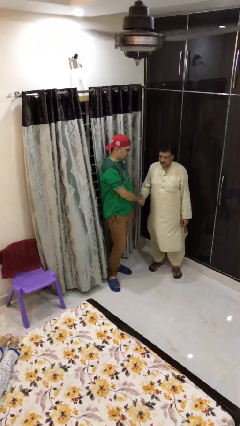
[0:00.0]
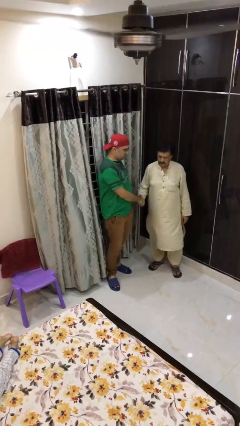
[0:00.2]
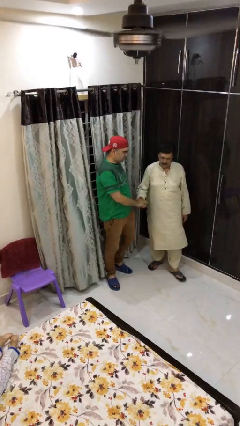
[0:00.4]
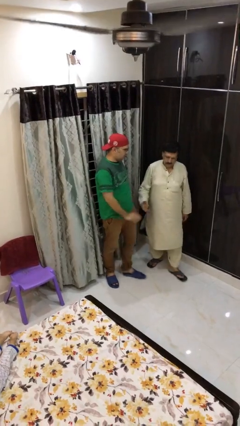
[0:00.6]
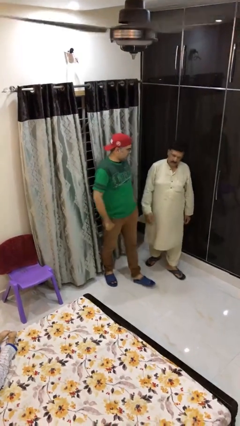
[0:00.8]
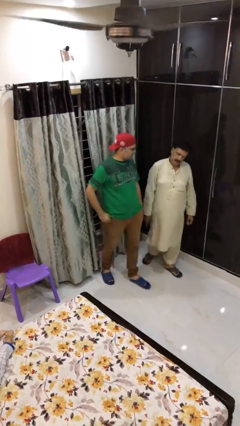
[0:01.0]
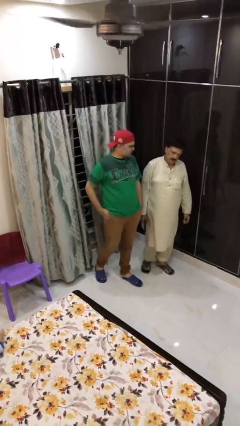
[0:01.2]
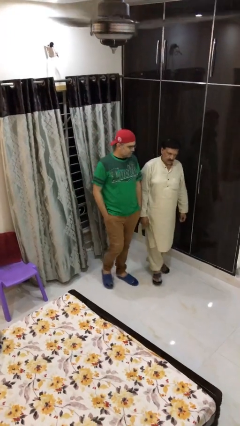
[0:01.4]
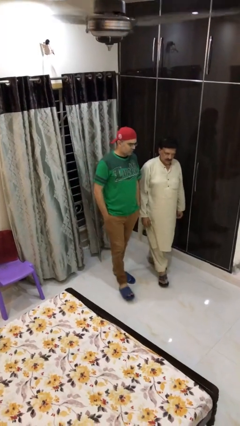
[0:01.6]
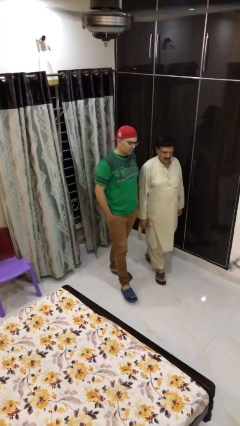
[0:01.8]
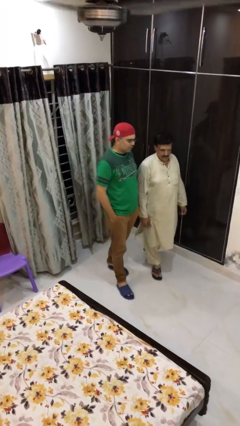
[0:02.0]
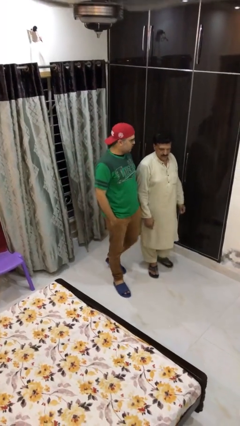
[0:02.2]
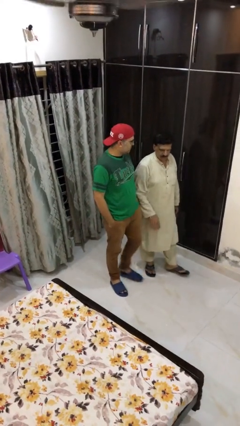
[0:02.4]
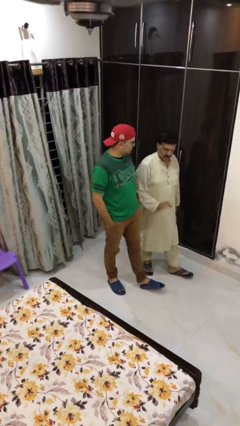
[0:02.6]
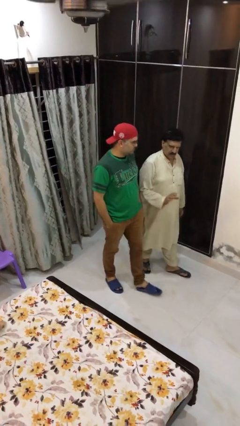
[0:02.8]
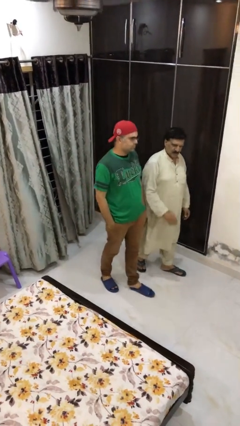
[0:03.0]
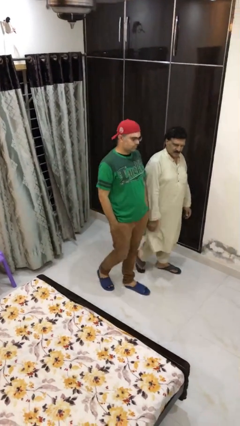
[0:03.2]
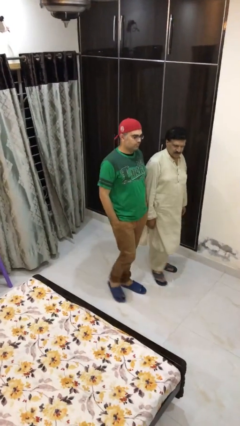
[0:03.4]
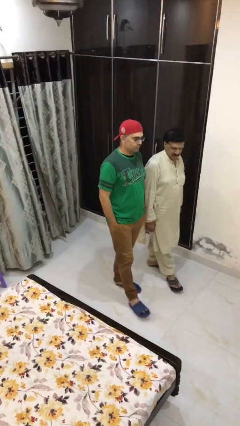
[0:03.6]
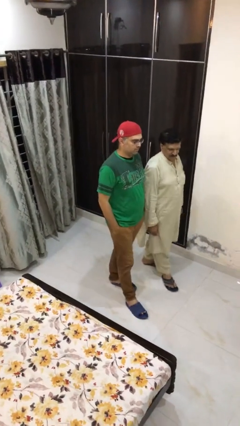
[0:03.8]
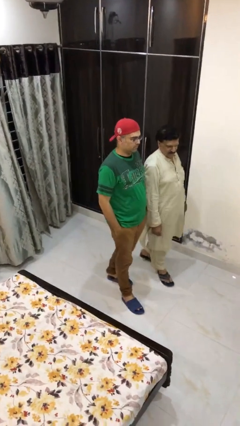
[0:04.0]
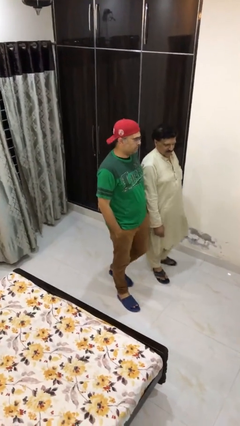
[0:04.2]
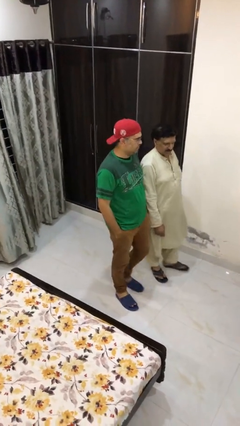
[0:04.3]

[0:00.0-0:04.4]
person talks to person

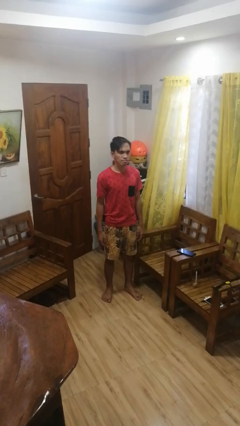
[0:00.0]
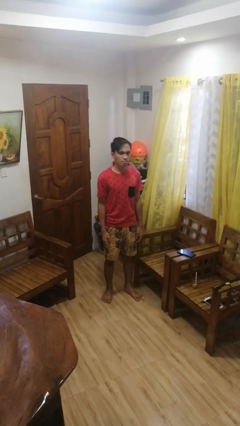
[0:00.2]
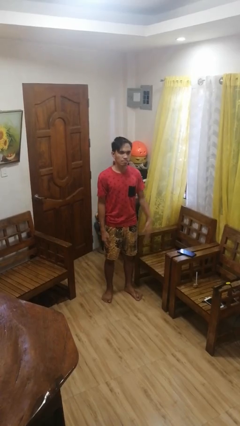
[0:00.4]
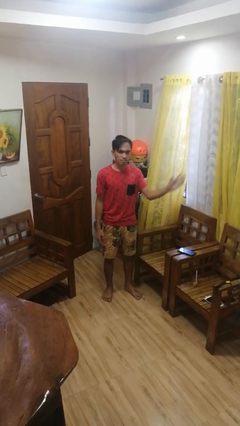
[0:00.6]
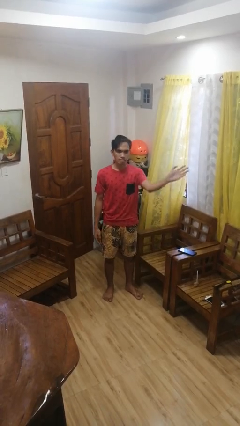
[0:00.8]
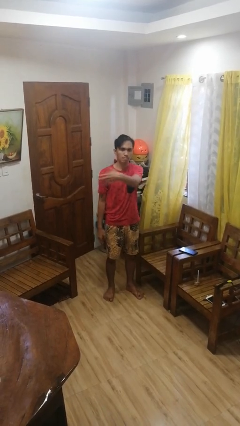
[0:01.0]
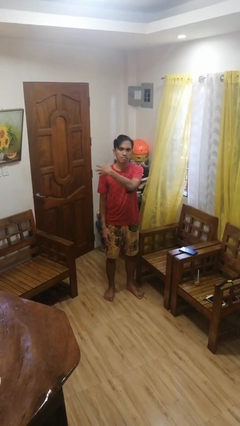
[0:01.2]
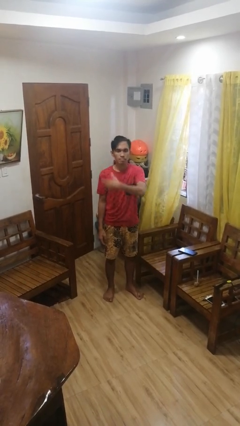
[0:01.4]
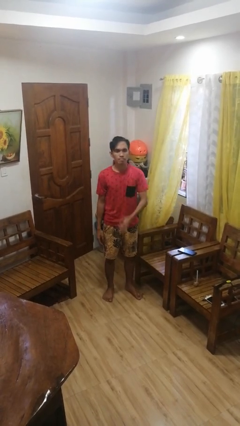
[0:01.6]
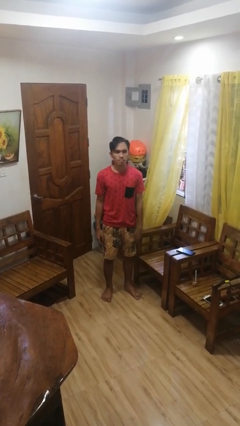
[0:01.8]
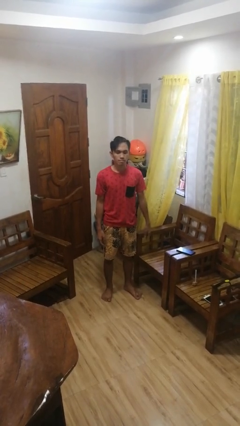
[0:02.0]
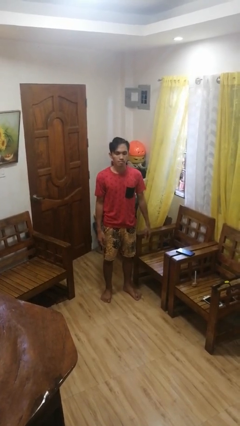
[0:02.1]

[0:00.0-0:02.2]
person gestures swipe right

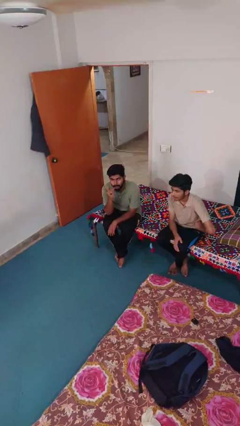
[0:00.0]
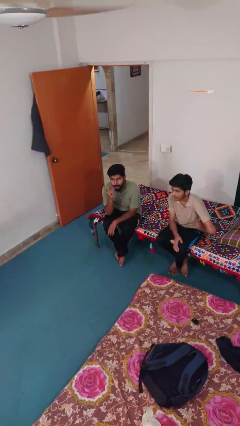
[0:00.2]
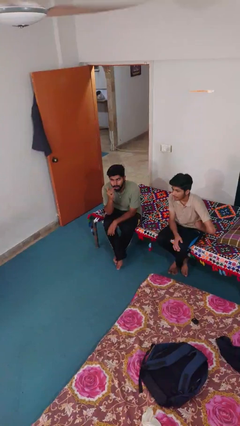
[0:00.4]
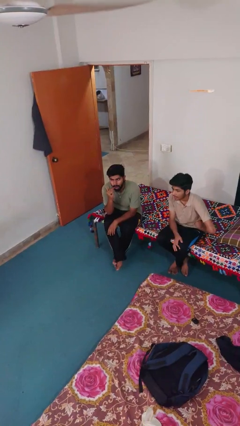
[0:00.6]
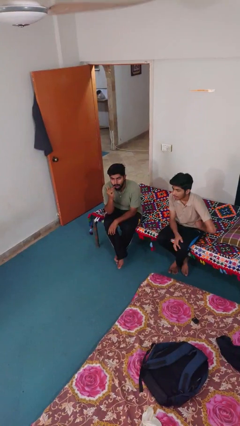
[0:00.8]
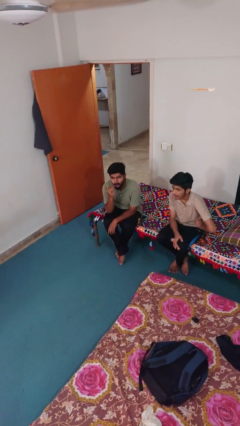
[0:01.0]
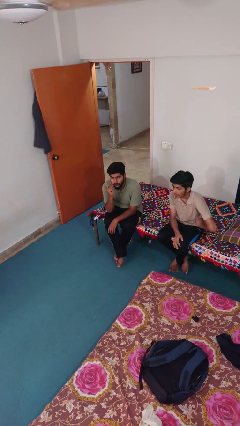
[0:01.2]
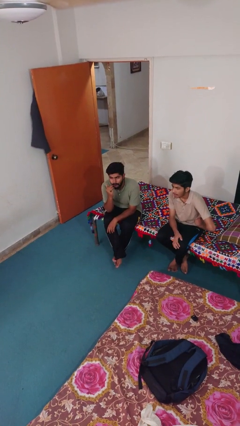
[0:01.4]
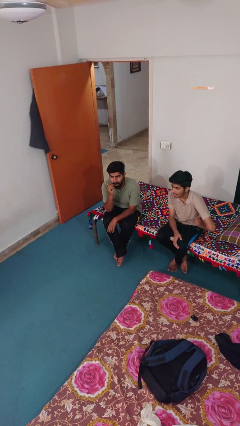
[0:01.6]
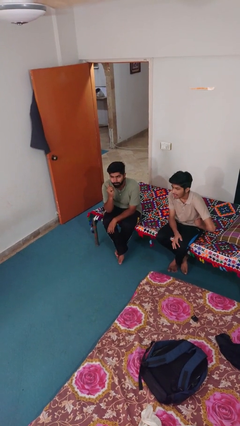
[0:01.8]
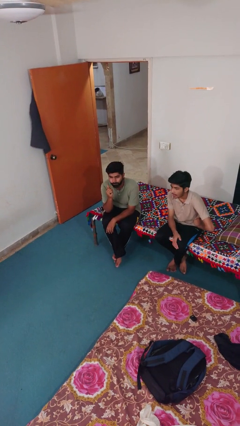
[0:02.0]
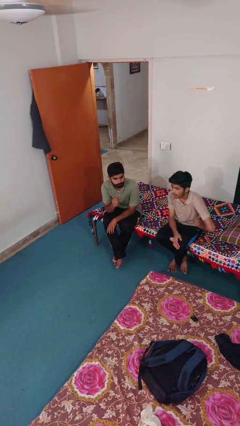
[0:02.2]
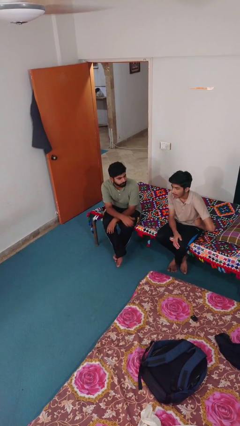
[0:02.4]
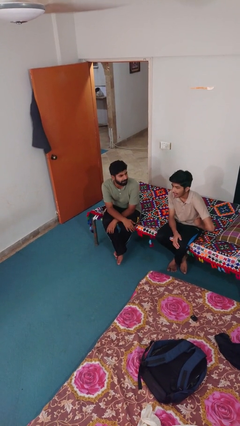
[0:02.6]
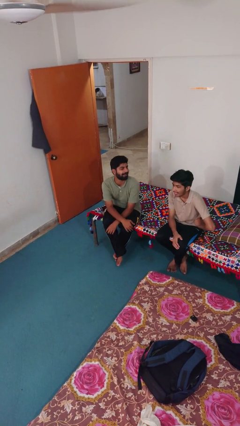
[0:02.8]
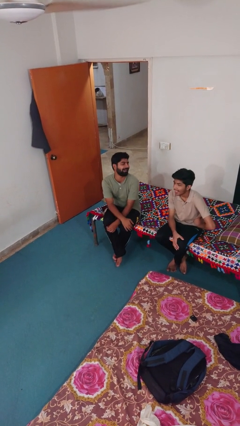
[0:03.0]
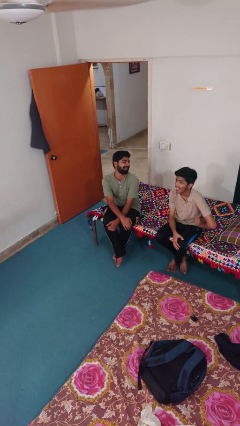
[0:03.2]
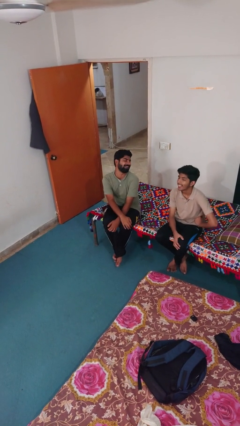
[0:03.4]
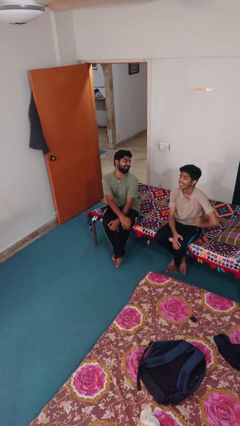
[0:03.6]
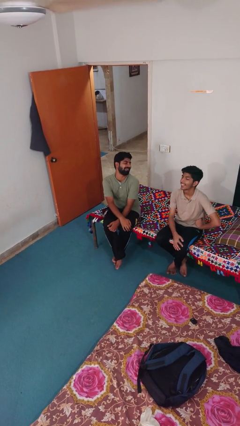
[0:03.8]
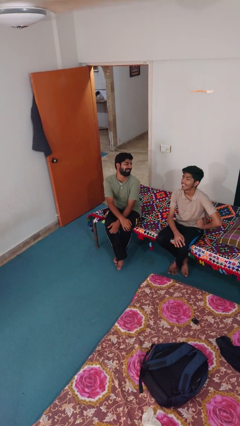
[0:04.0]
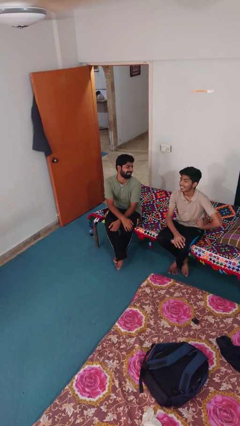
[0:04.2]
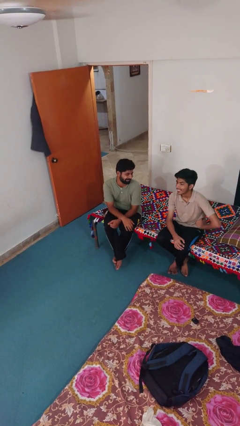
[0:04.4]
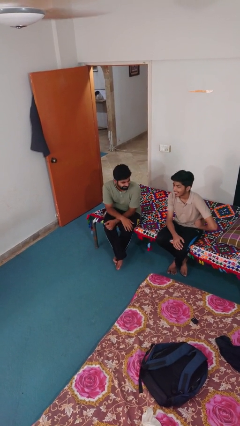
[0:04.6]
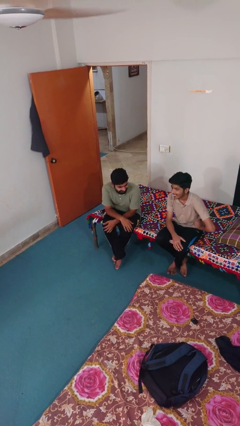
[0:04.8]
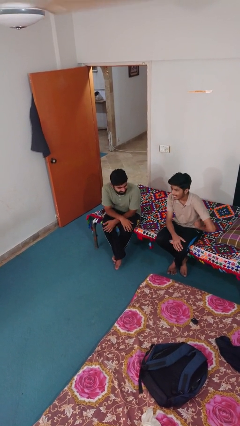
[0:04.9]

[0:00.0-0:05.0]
person laughs with person

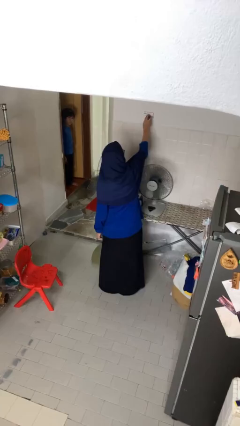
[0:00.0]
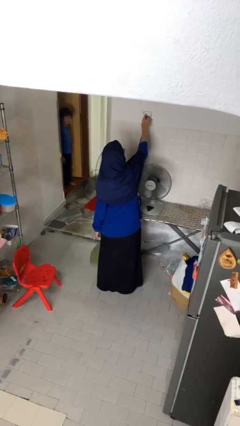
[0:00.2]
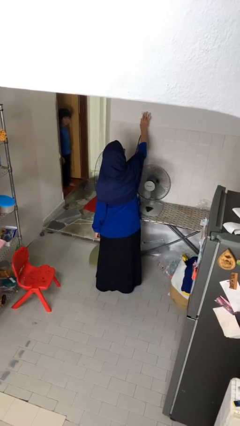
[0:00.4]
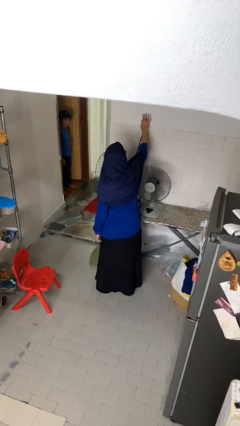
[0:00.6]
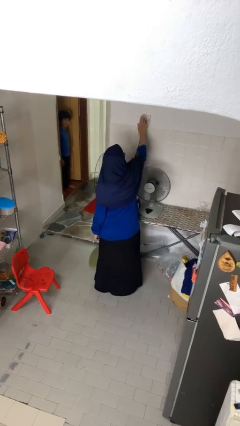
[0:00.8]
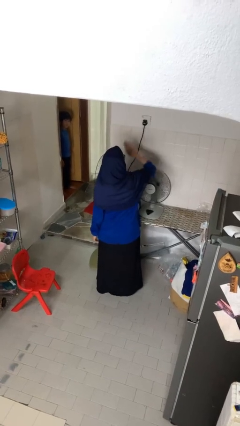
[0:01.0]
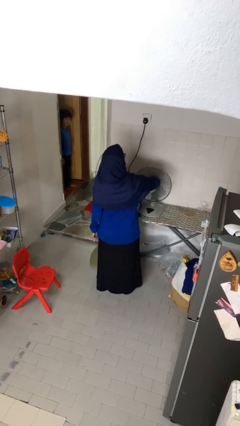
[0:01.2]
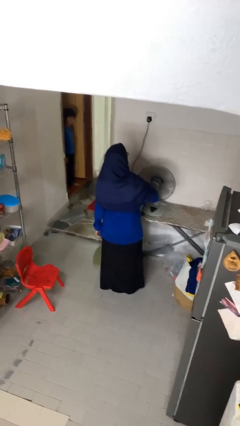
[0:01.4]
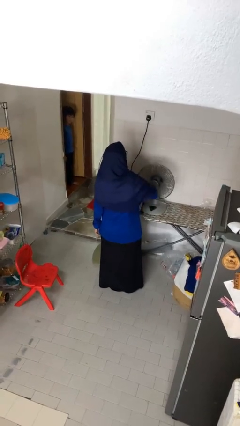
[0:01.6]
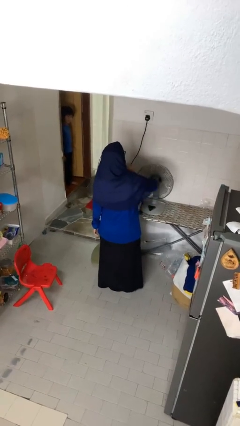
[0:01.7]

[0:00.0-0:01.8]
person plugs into electrical socket

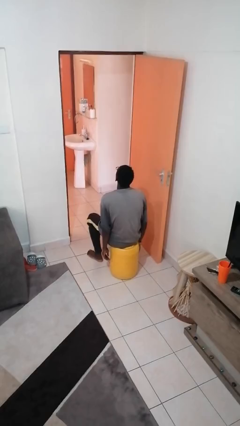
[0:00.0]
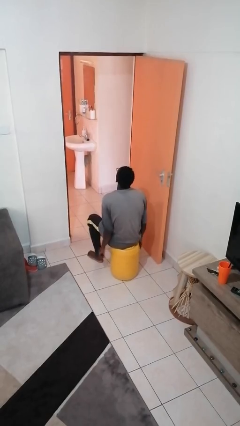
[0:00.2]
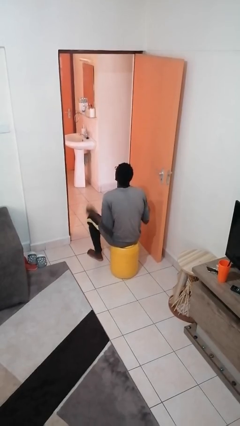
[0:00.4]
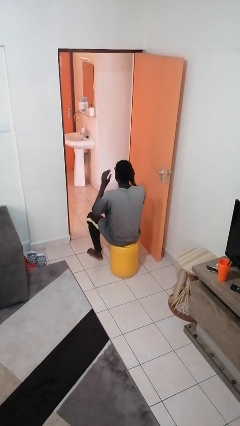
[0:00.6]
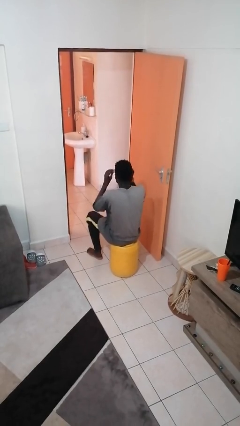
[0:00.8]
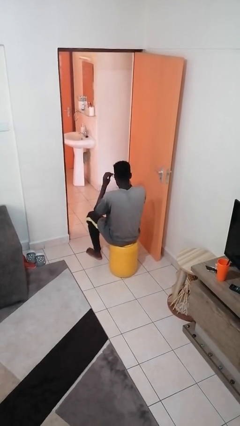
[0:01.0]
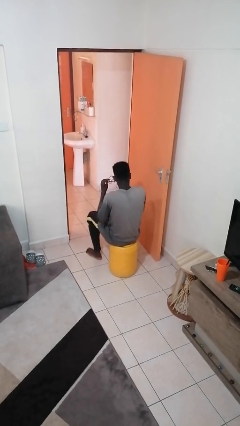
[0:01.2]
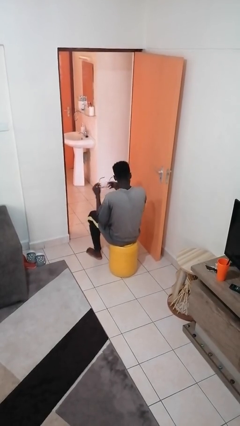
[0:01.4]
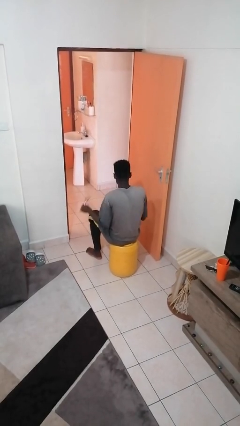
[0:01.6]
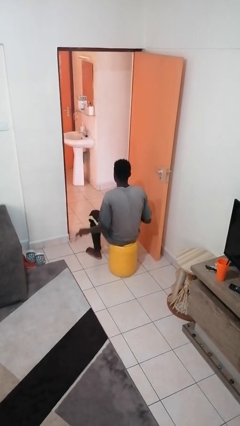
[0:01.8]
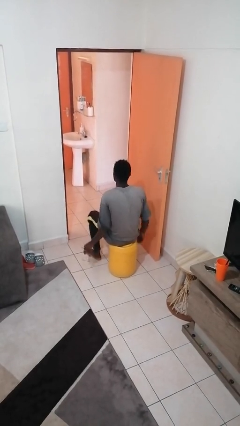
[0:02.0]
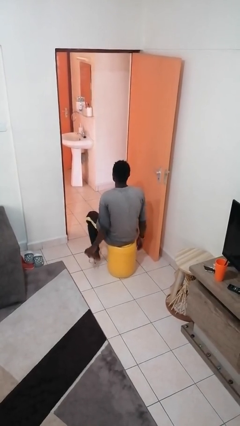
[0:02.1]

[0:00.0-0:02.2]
person takes off glasses

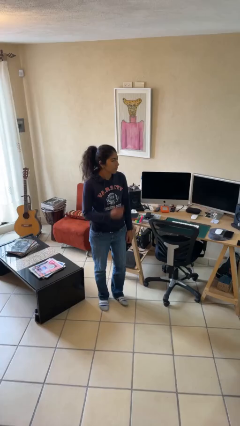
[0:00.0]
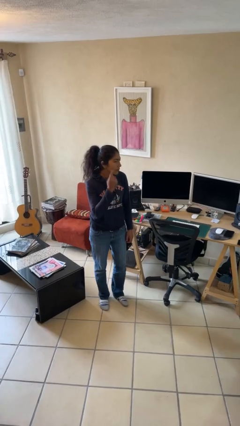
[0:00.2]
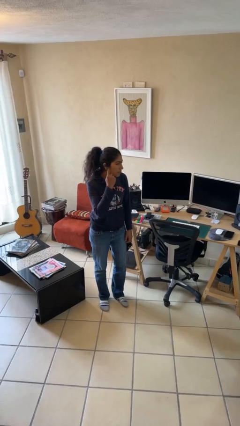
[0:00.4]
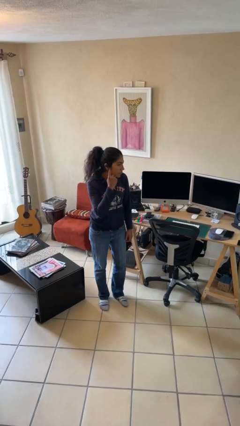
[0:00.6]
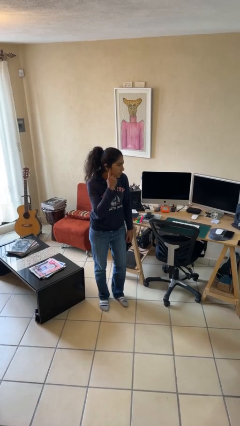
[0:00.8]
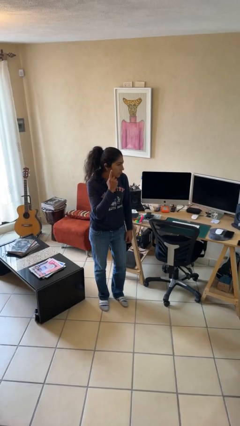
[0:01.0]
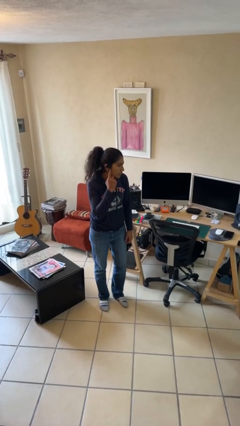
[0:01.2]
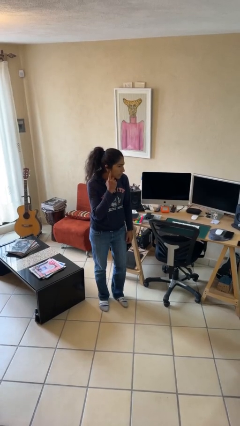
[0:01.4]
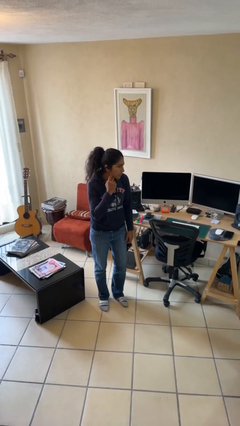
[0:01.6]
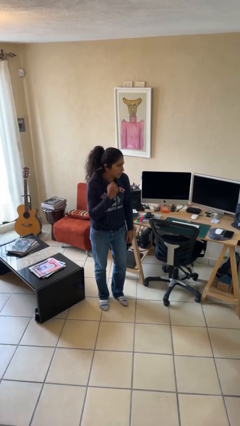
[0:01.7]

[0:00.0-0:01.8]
person gestures listen closely
